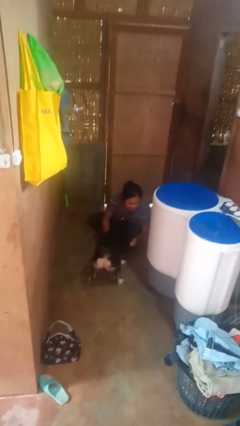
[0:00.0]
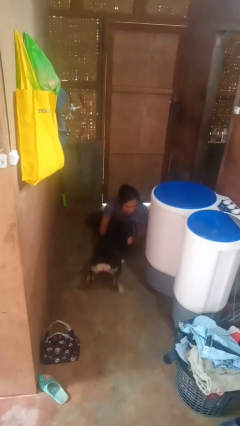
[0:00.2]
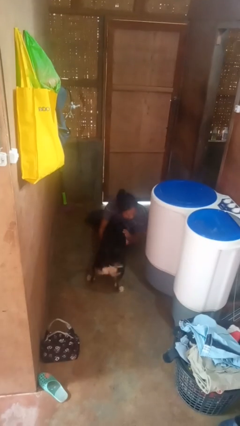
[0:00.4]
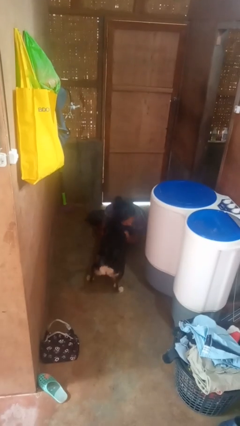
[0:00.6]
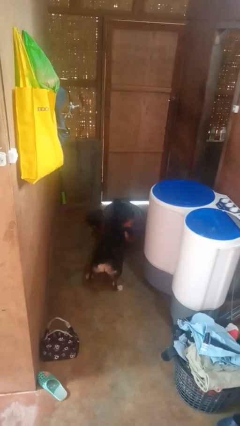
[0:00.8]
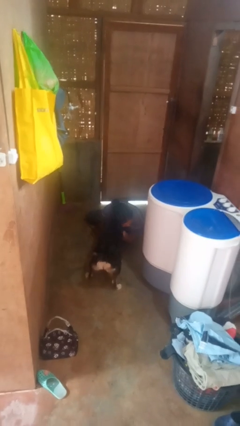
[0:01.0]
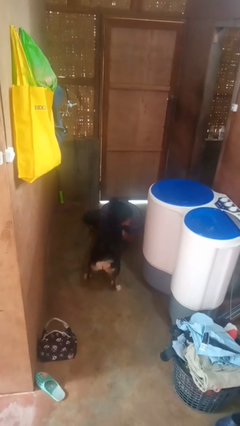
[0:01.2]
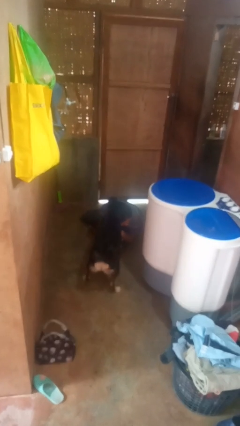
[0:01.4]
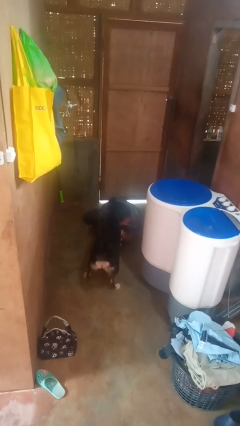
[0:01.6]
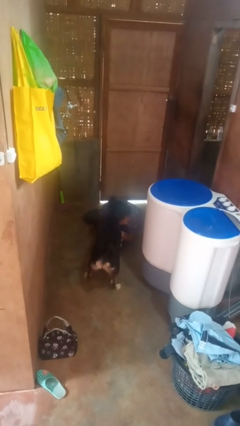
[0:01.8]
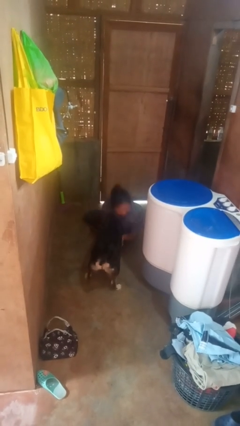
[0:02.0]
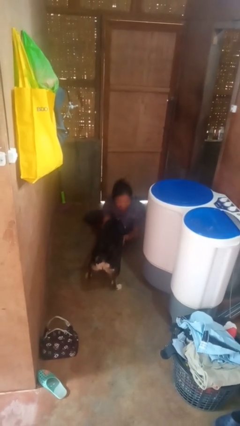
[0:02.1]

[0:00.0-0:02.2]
person hugs dog

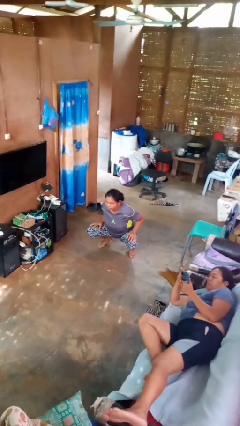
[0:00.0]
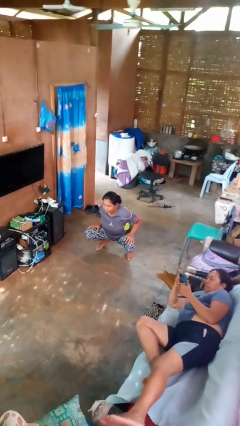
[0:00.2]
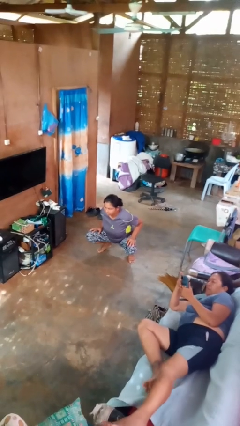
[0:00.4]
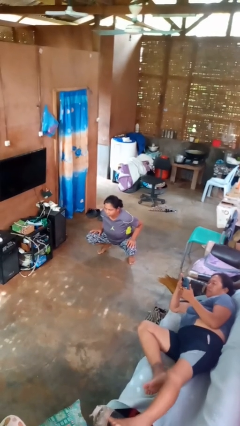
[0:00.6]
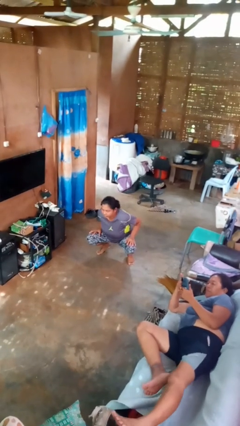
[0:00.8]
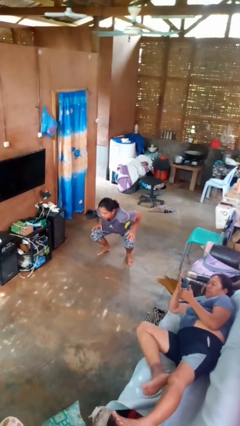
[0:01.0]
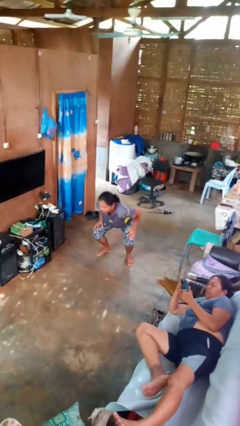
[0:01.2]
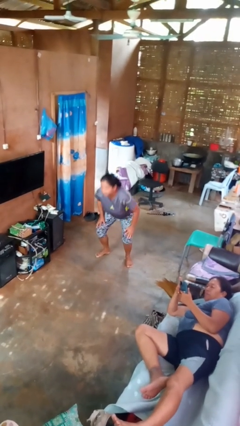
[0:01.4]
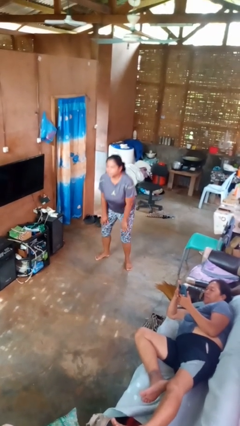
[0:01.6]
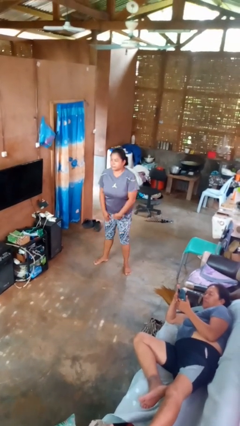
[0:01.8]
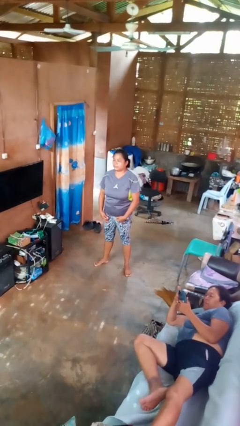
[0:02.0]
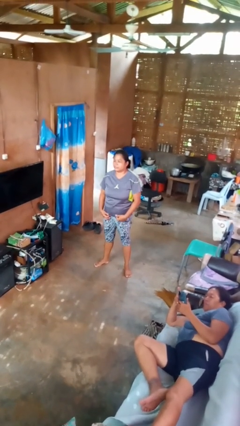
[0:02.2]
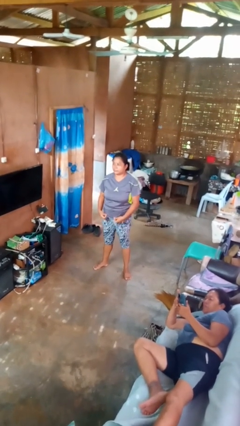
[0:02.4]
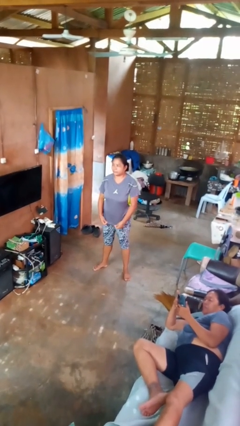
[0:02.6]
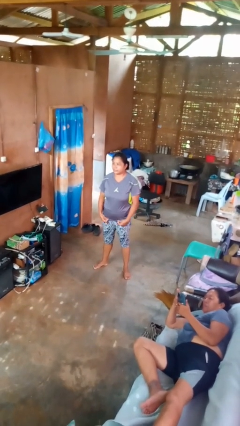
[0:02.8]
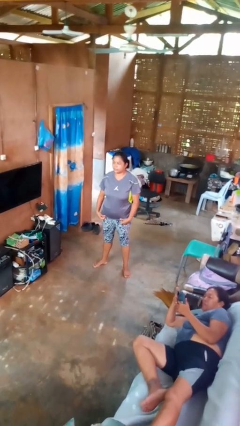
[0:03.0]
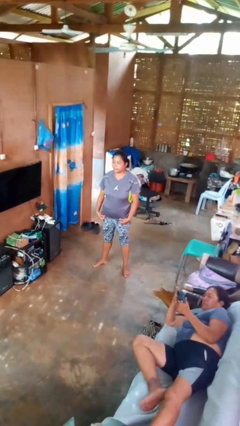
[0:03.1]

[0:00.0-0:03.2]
person stands up

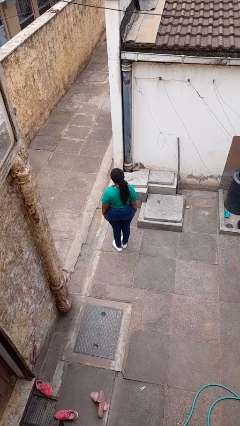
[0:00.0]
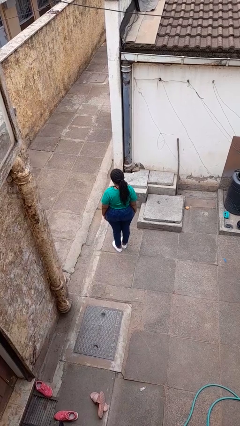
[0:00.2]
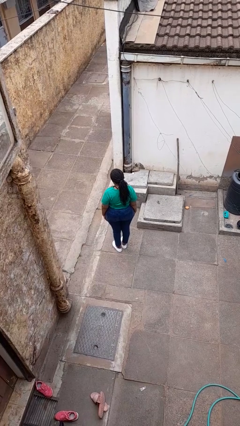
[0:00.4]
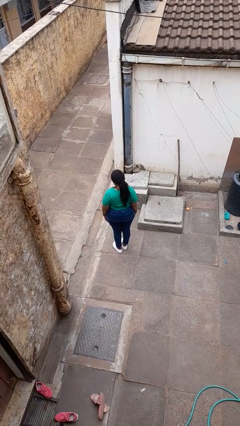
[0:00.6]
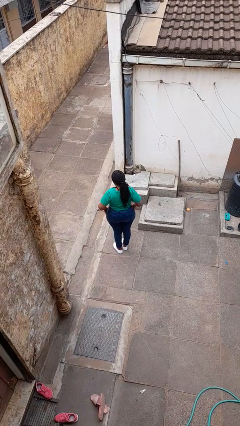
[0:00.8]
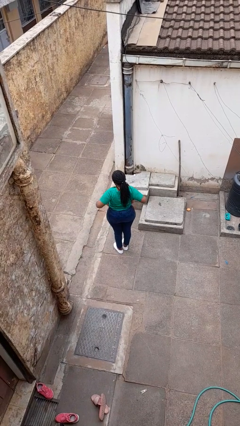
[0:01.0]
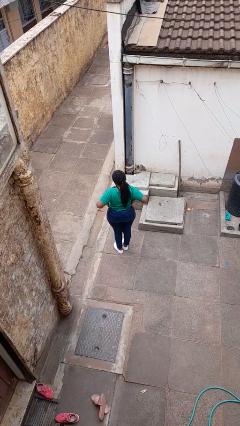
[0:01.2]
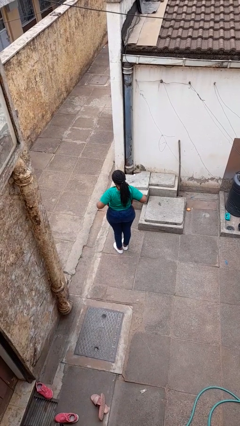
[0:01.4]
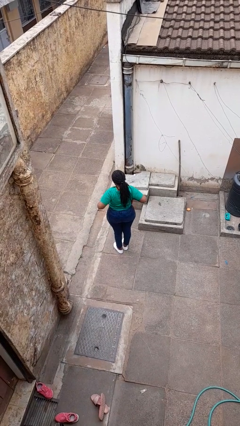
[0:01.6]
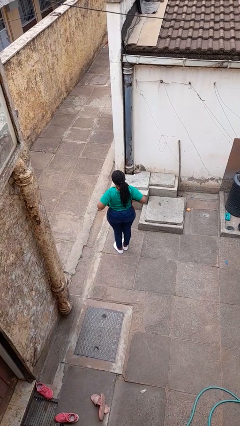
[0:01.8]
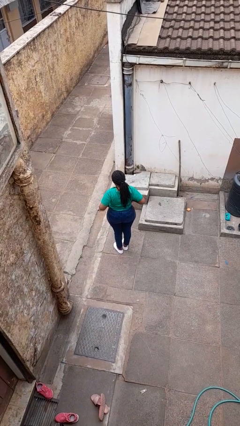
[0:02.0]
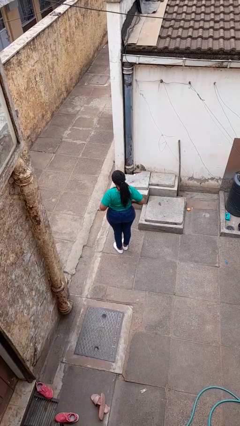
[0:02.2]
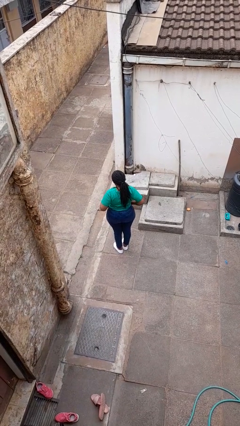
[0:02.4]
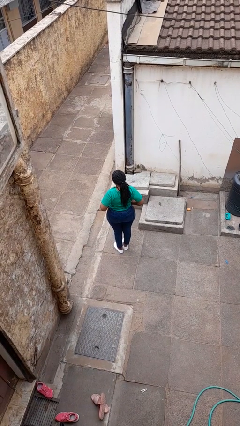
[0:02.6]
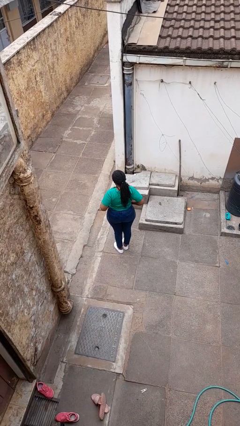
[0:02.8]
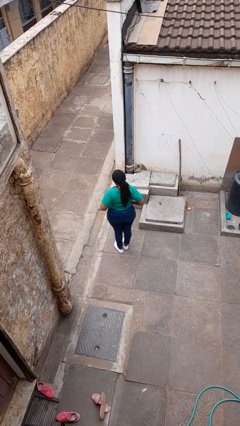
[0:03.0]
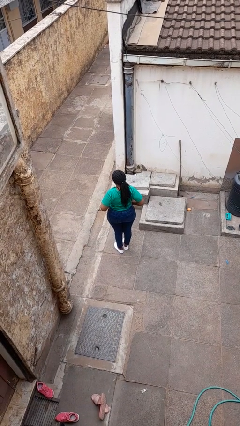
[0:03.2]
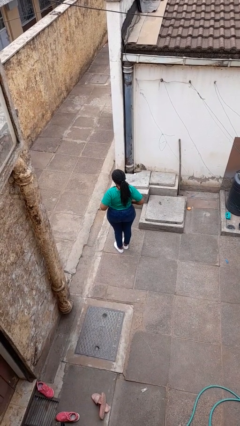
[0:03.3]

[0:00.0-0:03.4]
person puts hands in back pockets

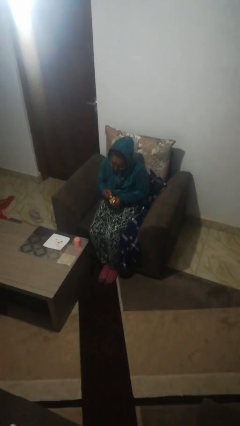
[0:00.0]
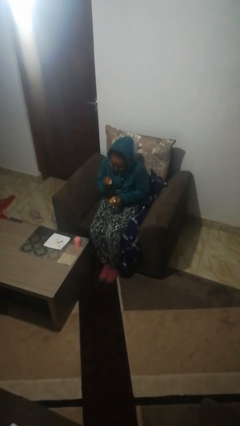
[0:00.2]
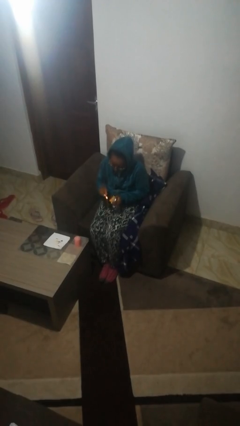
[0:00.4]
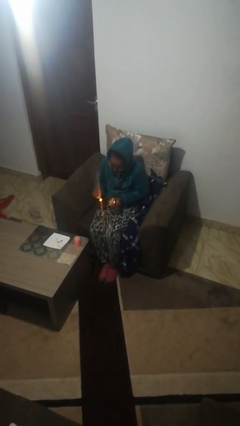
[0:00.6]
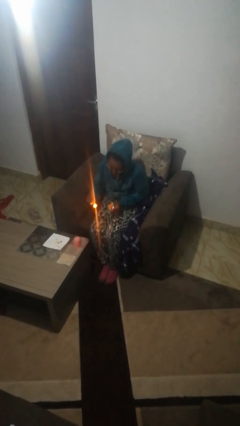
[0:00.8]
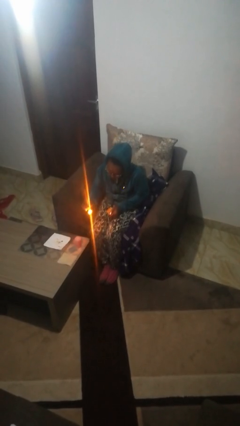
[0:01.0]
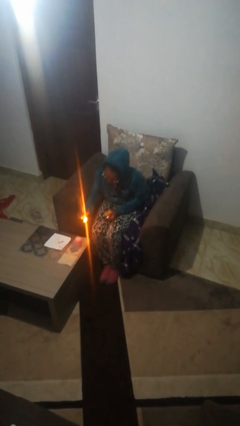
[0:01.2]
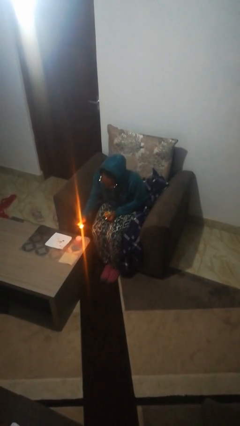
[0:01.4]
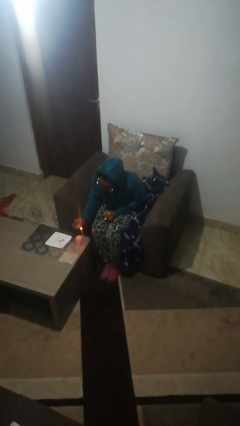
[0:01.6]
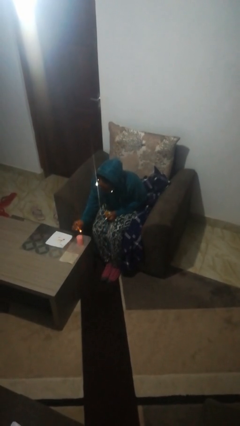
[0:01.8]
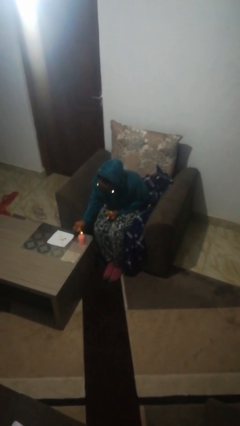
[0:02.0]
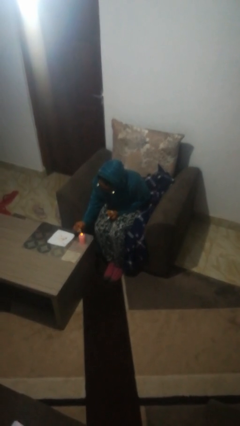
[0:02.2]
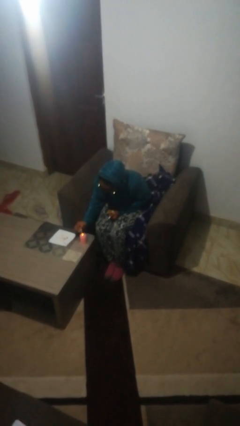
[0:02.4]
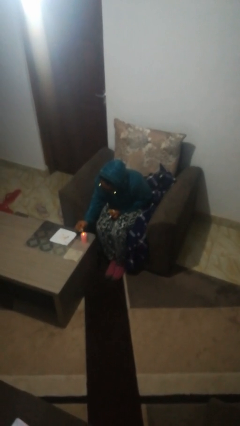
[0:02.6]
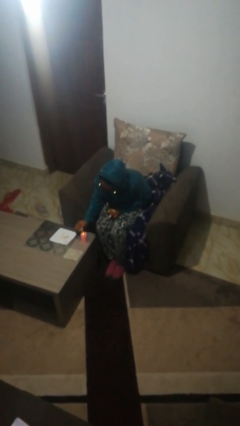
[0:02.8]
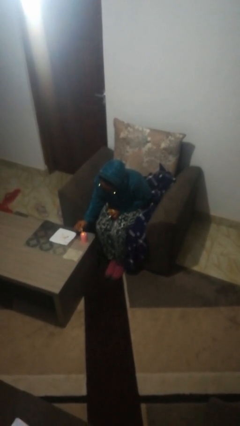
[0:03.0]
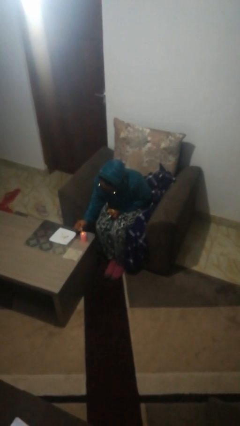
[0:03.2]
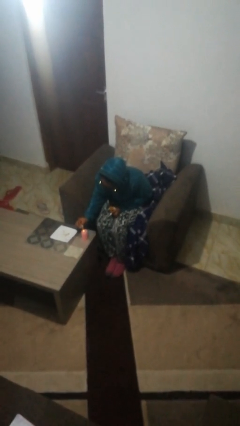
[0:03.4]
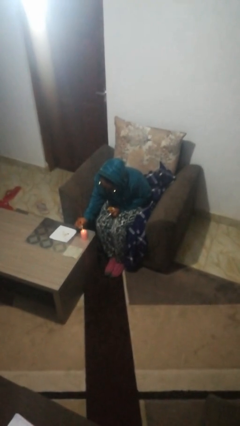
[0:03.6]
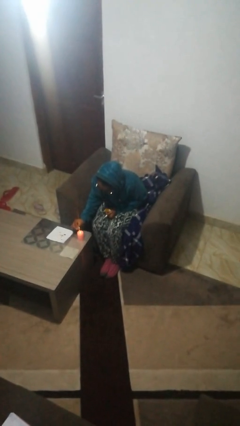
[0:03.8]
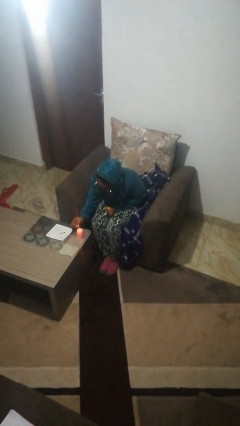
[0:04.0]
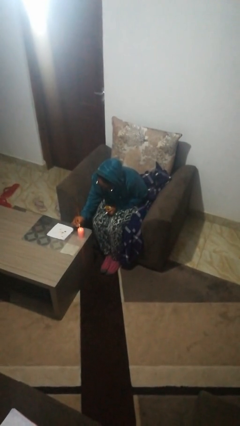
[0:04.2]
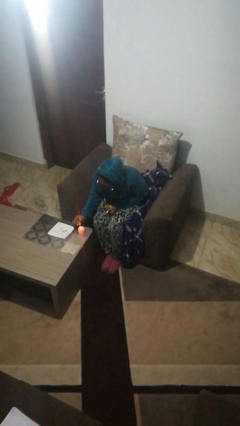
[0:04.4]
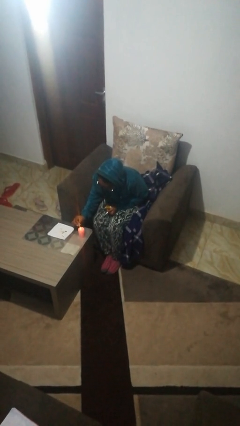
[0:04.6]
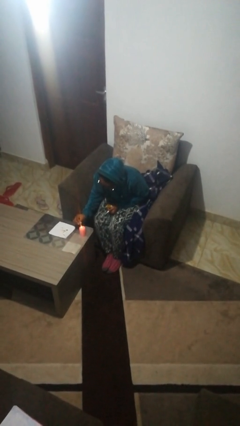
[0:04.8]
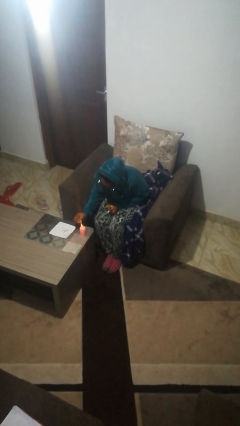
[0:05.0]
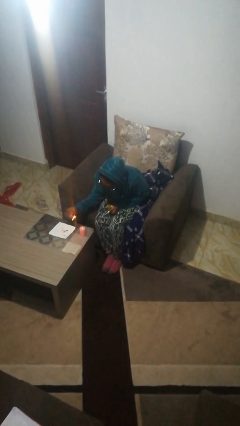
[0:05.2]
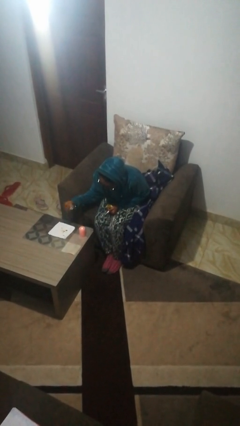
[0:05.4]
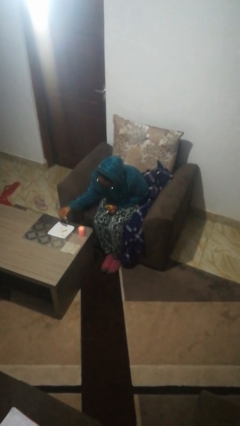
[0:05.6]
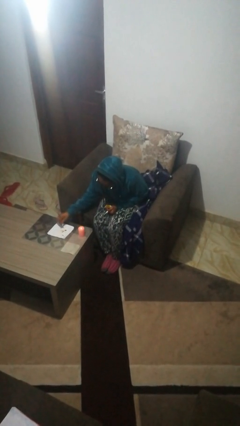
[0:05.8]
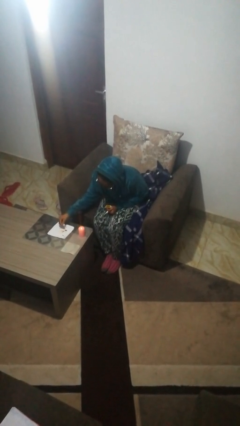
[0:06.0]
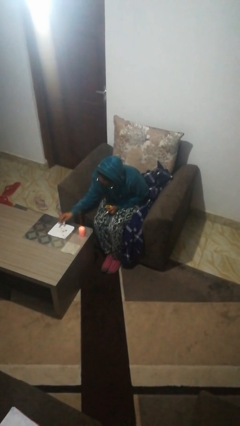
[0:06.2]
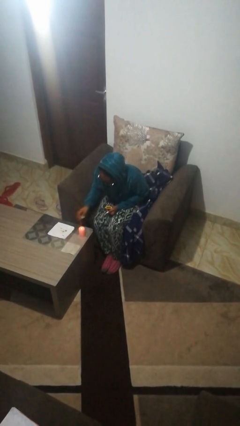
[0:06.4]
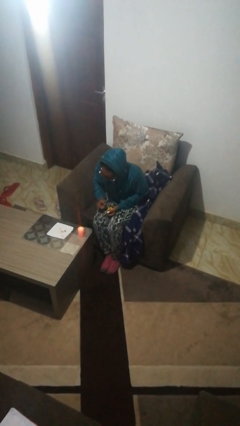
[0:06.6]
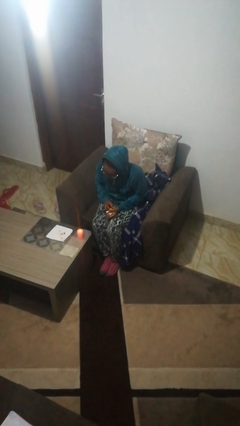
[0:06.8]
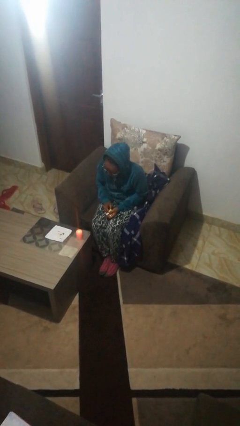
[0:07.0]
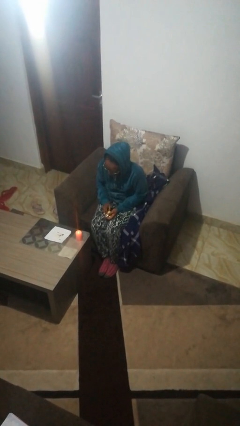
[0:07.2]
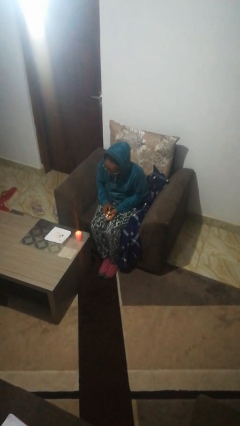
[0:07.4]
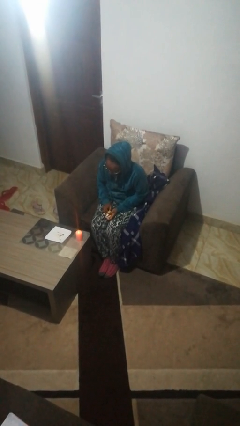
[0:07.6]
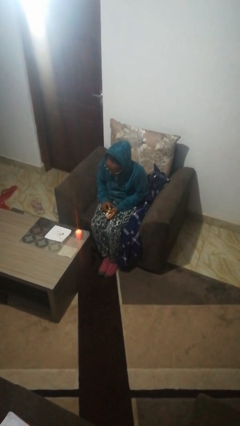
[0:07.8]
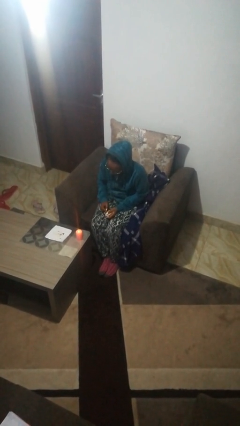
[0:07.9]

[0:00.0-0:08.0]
person lights candle

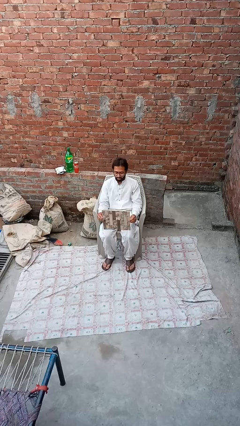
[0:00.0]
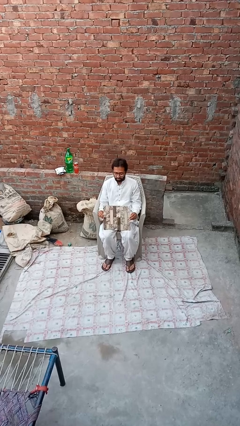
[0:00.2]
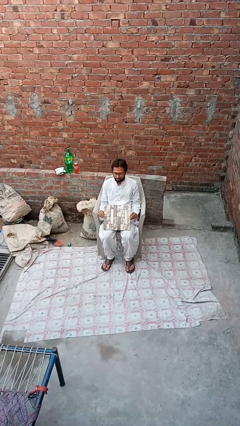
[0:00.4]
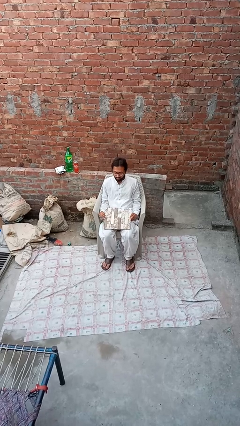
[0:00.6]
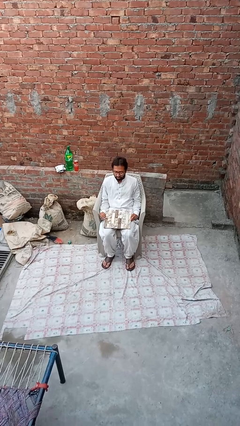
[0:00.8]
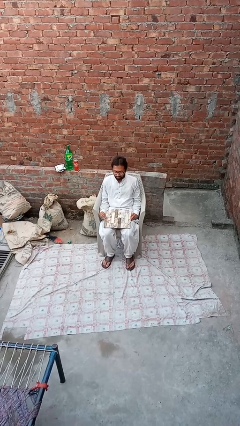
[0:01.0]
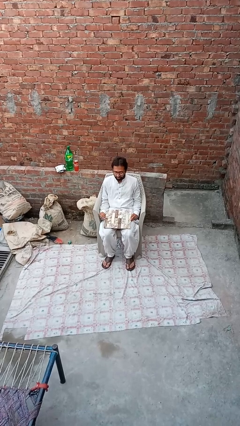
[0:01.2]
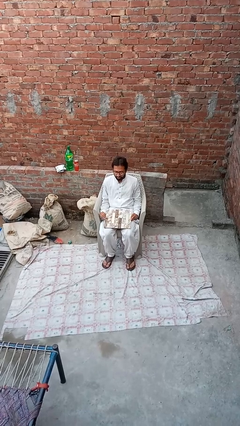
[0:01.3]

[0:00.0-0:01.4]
person closes laptop
